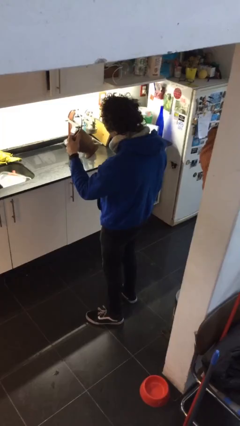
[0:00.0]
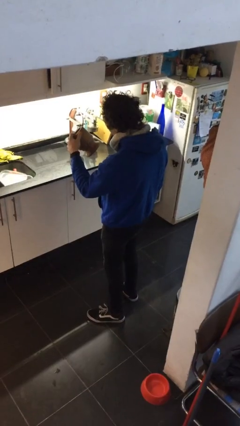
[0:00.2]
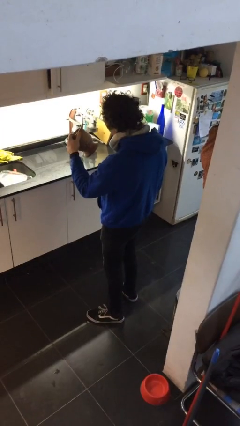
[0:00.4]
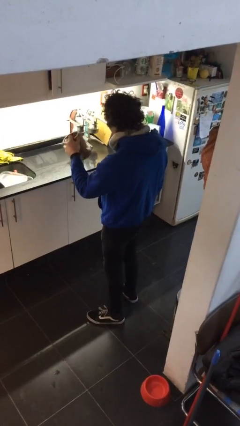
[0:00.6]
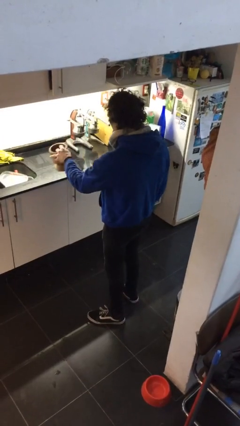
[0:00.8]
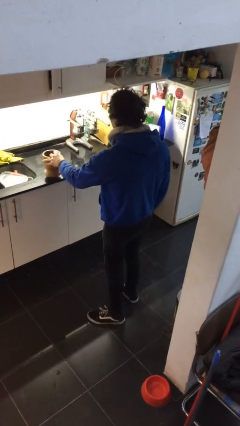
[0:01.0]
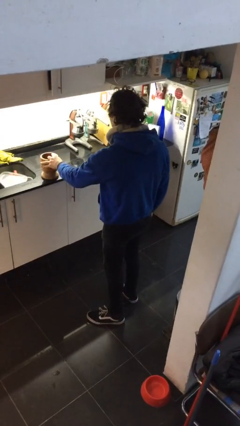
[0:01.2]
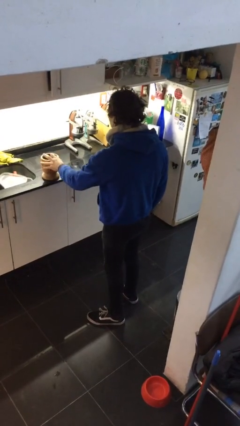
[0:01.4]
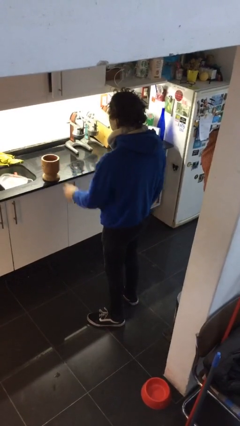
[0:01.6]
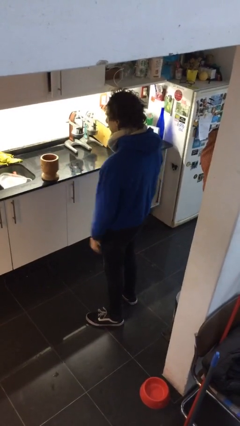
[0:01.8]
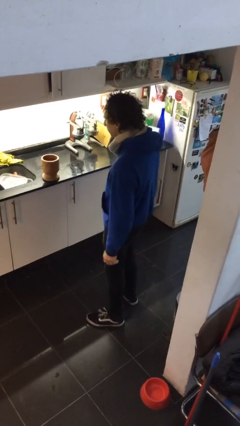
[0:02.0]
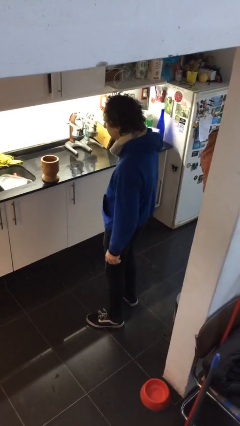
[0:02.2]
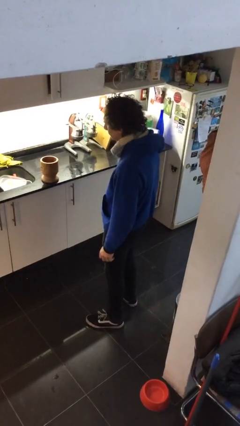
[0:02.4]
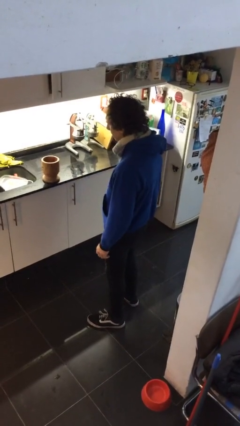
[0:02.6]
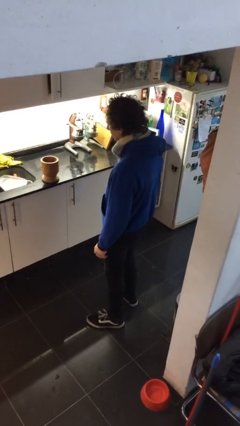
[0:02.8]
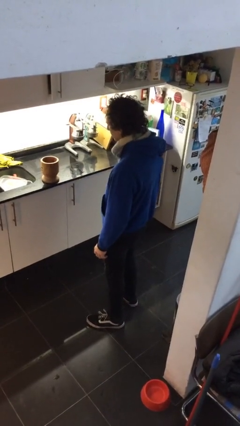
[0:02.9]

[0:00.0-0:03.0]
person puts down object on countertop

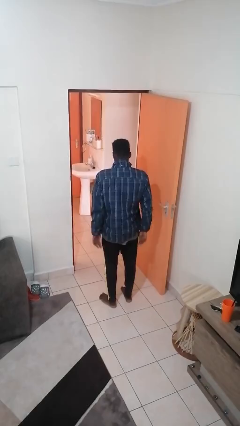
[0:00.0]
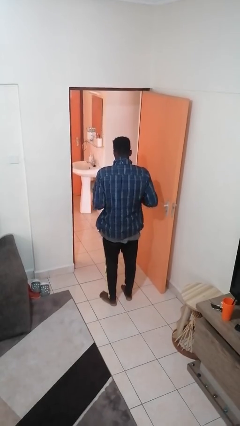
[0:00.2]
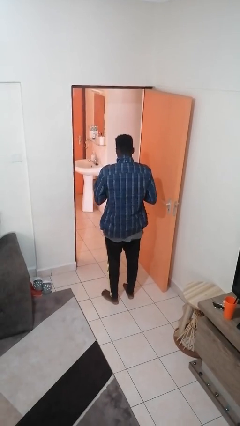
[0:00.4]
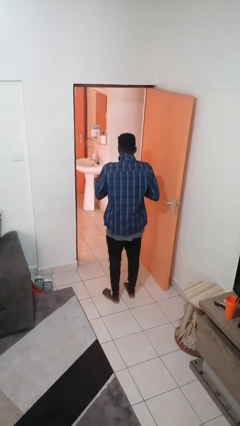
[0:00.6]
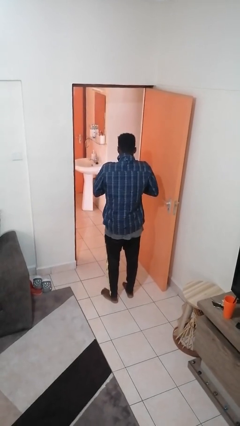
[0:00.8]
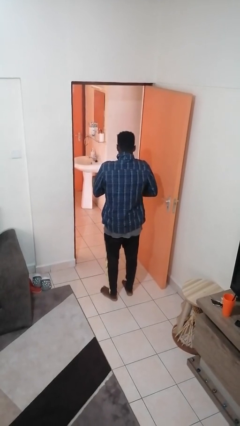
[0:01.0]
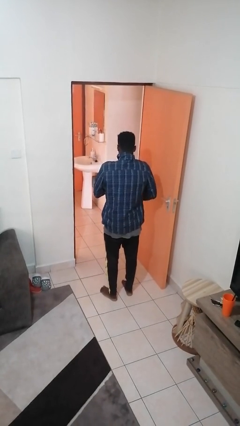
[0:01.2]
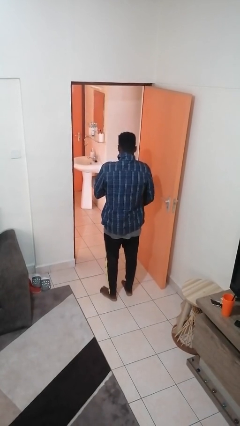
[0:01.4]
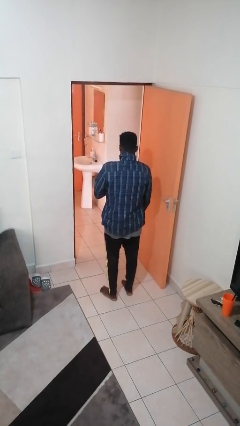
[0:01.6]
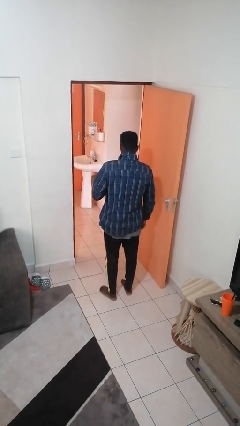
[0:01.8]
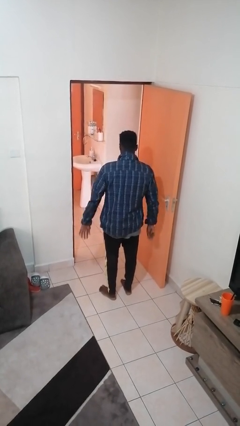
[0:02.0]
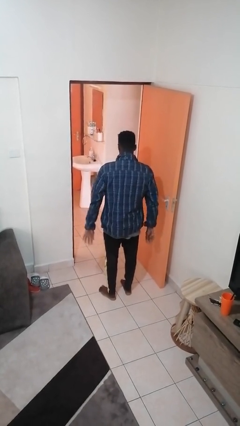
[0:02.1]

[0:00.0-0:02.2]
person unzips jacket

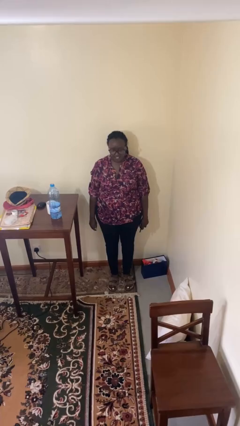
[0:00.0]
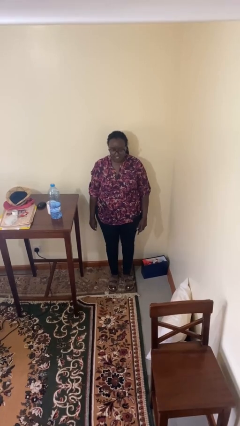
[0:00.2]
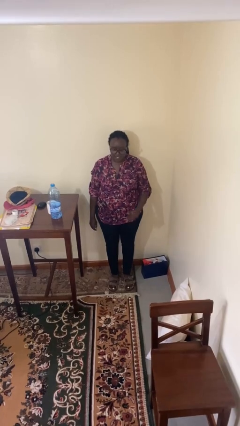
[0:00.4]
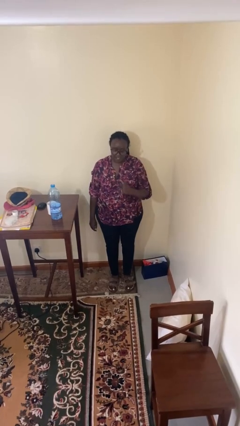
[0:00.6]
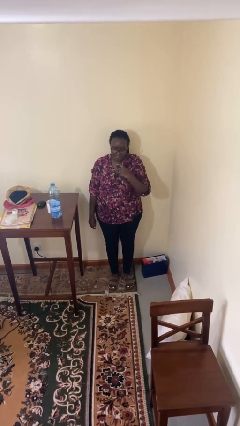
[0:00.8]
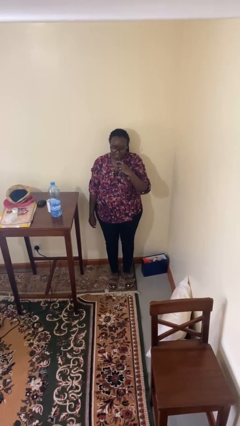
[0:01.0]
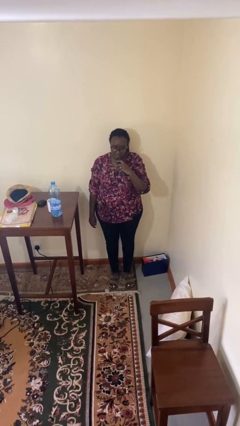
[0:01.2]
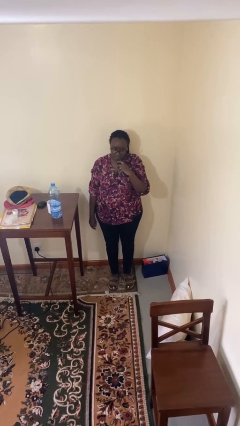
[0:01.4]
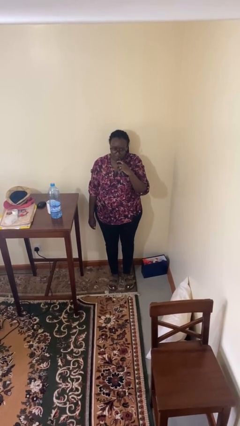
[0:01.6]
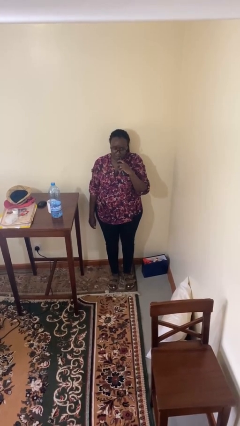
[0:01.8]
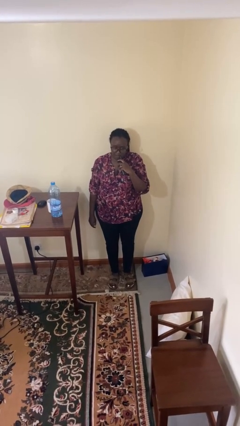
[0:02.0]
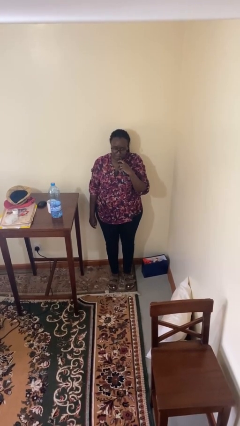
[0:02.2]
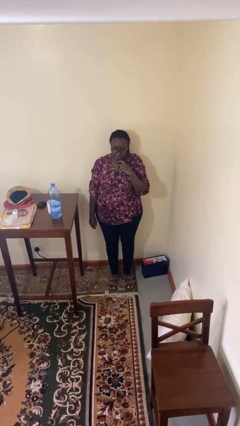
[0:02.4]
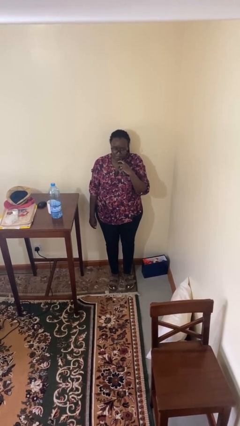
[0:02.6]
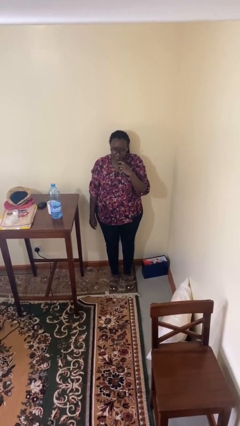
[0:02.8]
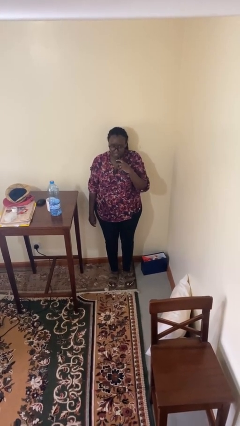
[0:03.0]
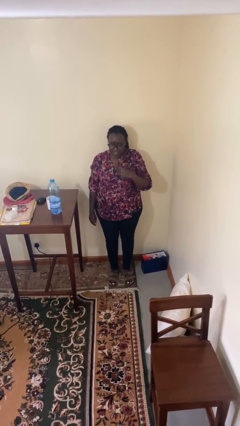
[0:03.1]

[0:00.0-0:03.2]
person vapes

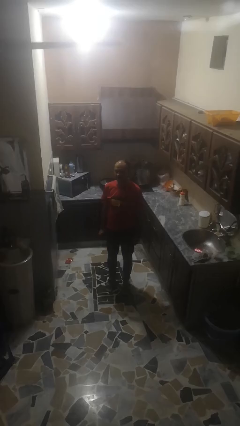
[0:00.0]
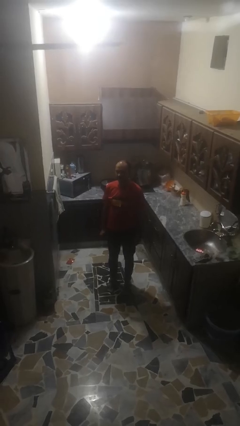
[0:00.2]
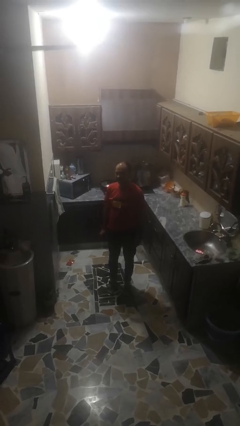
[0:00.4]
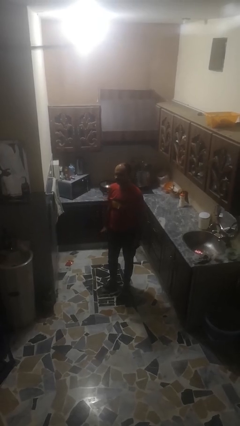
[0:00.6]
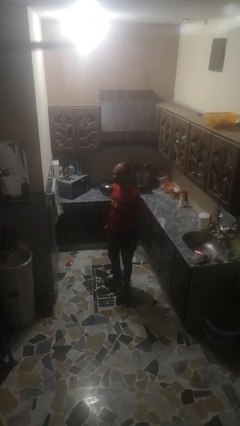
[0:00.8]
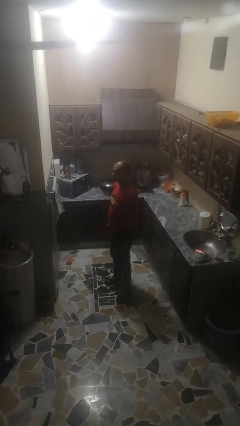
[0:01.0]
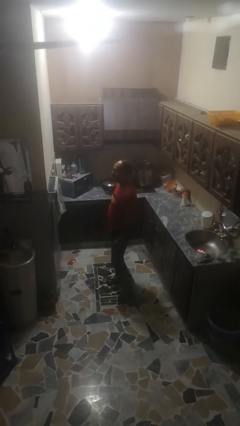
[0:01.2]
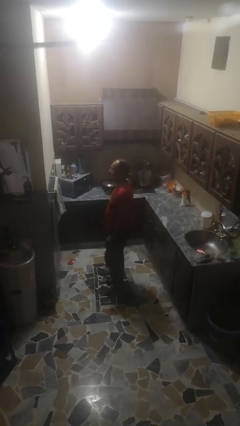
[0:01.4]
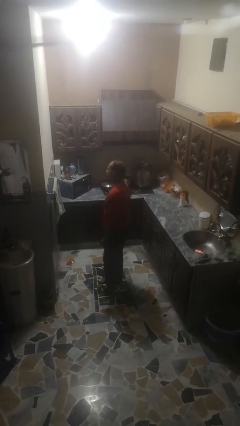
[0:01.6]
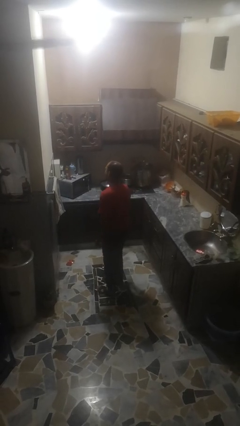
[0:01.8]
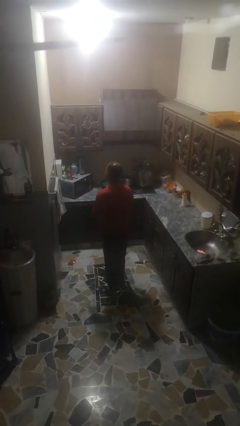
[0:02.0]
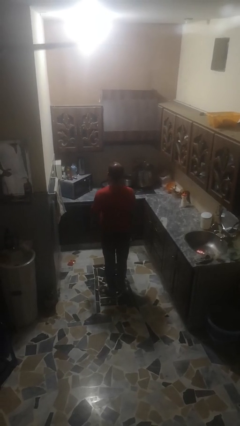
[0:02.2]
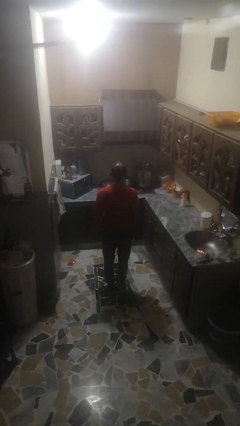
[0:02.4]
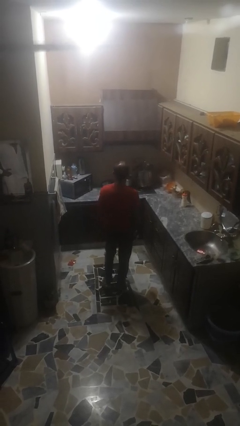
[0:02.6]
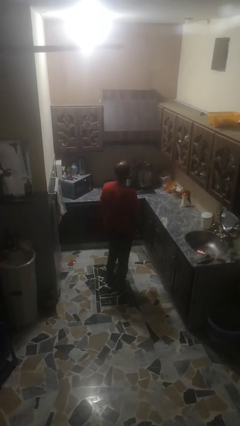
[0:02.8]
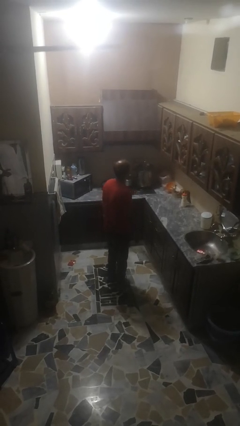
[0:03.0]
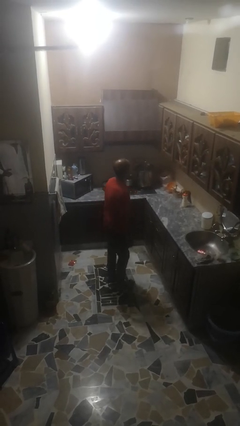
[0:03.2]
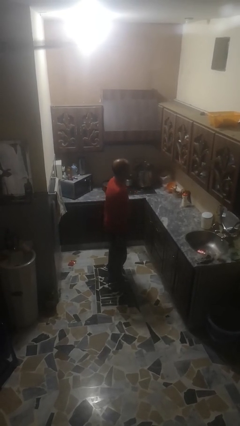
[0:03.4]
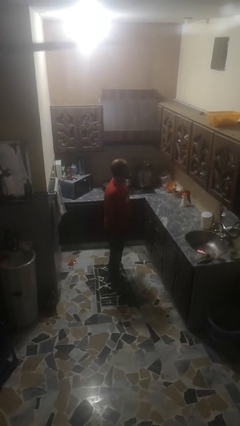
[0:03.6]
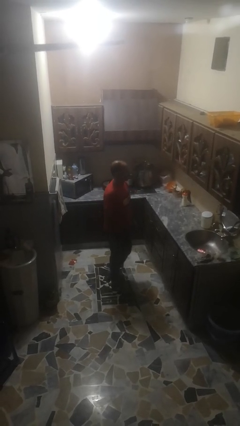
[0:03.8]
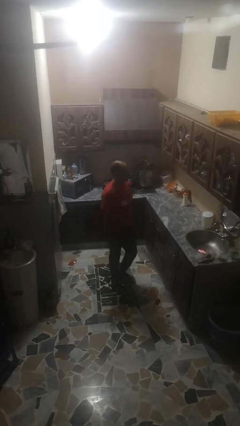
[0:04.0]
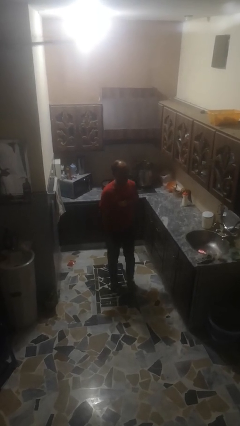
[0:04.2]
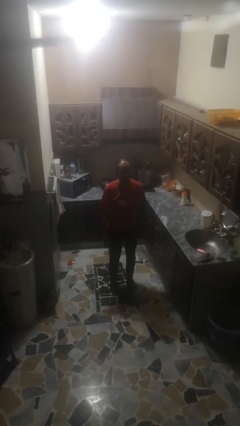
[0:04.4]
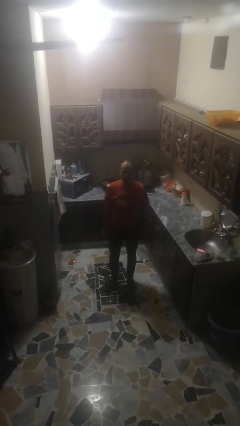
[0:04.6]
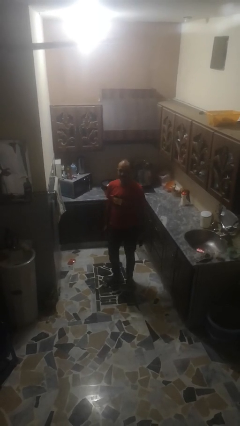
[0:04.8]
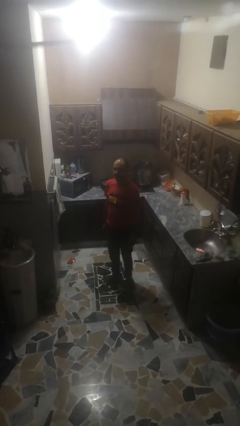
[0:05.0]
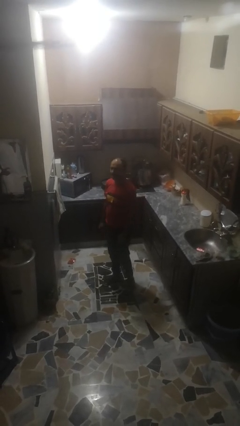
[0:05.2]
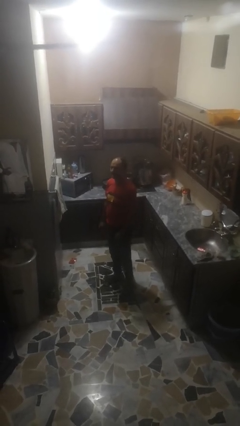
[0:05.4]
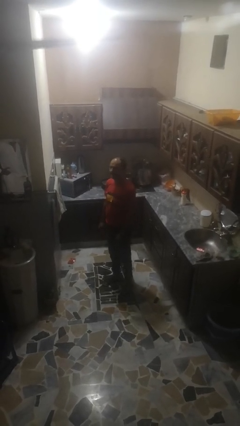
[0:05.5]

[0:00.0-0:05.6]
person twirls

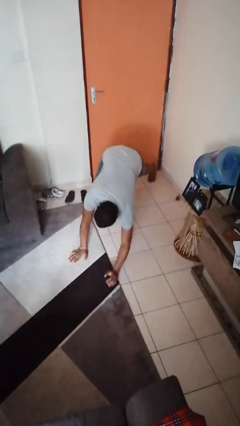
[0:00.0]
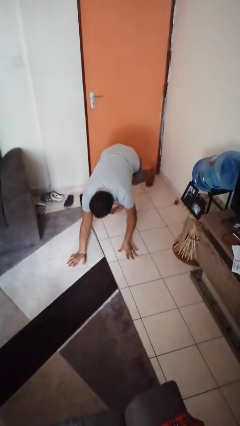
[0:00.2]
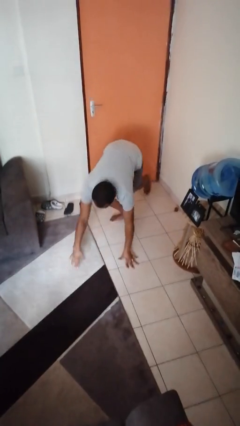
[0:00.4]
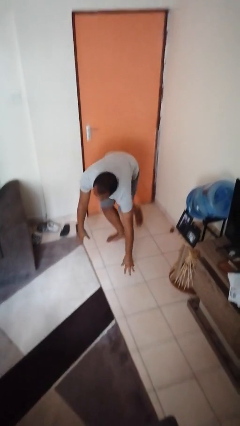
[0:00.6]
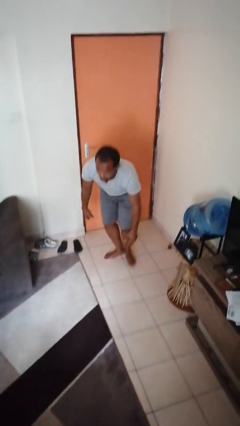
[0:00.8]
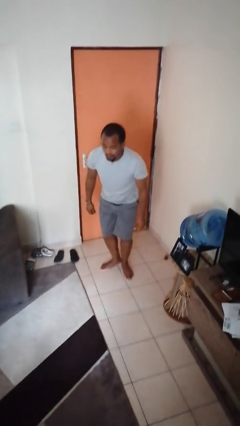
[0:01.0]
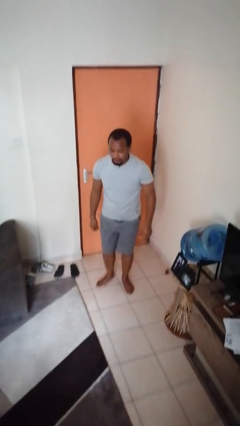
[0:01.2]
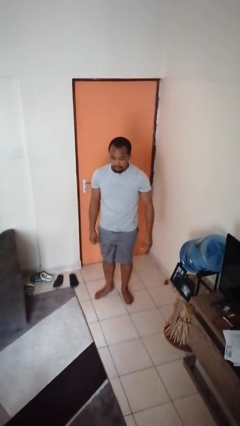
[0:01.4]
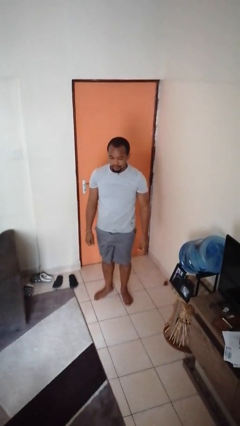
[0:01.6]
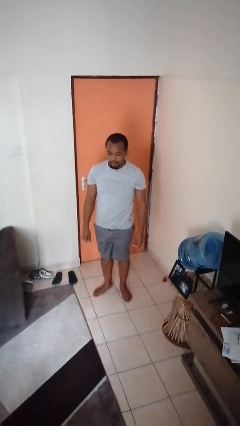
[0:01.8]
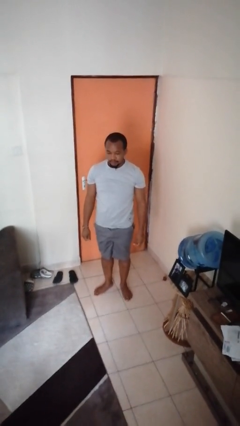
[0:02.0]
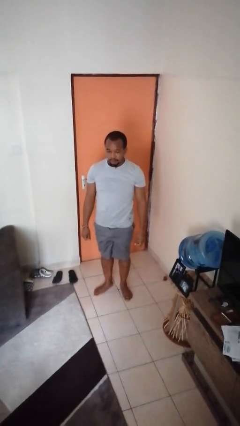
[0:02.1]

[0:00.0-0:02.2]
person stands up from floor

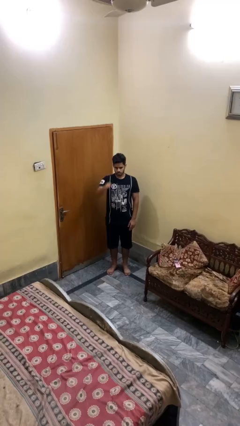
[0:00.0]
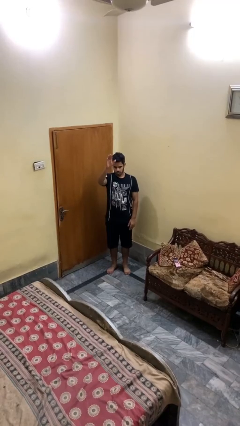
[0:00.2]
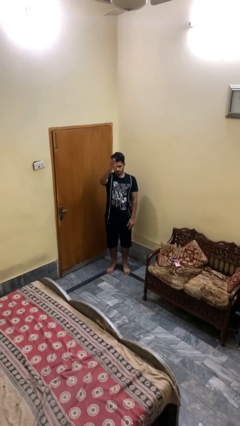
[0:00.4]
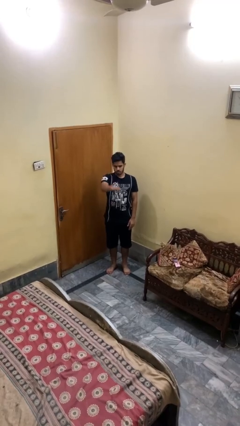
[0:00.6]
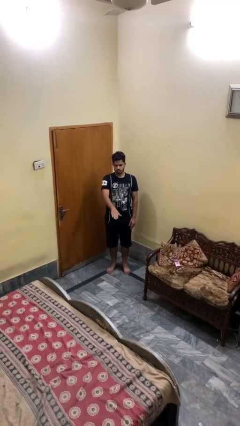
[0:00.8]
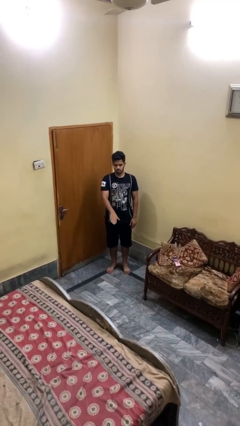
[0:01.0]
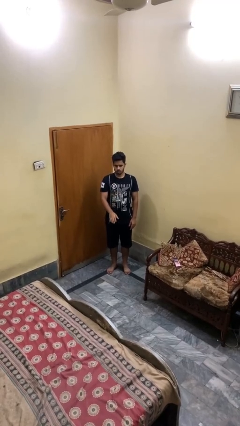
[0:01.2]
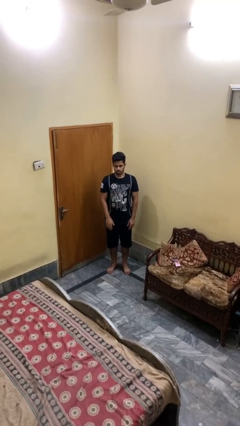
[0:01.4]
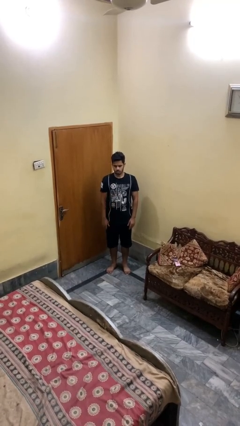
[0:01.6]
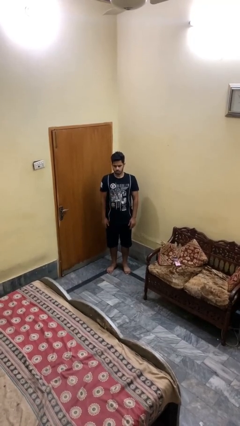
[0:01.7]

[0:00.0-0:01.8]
person gestures swipe down
